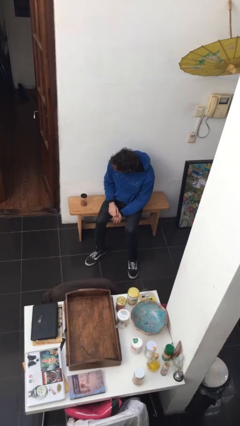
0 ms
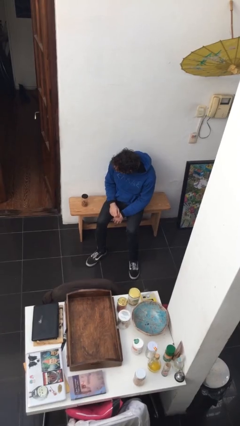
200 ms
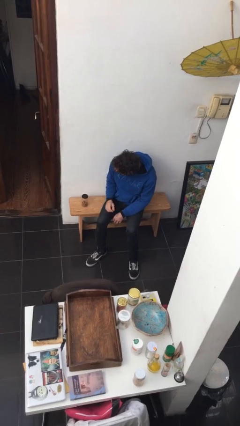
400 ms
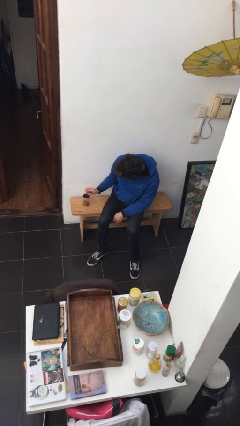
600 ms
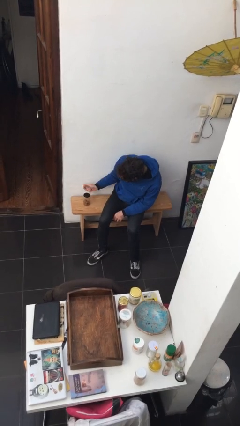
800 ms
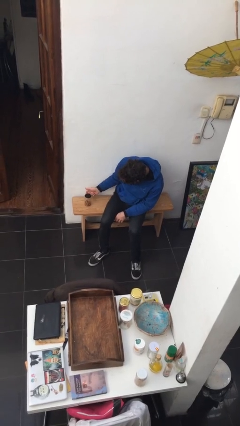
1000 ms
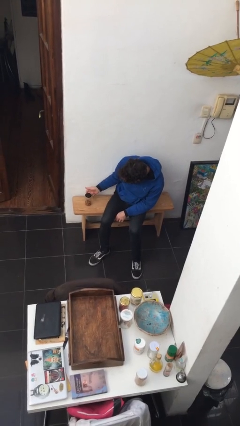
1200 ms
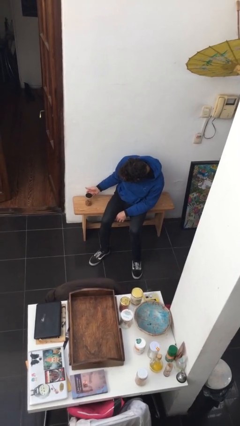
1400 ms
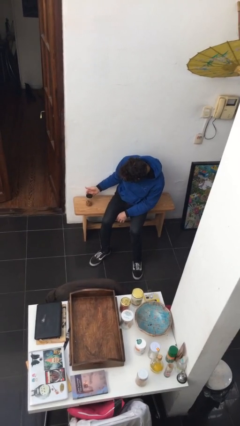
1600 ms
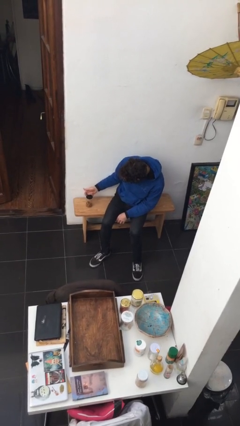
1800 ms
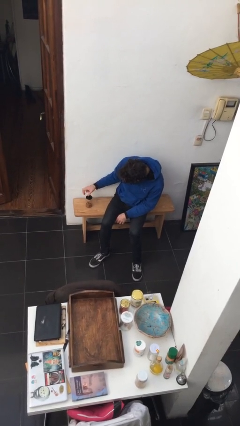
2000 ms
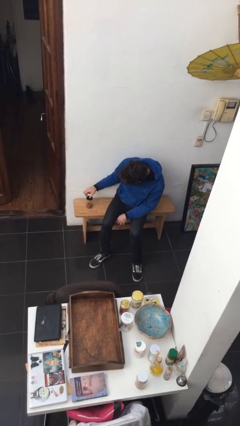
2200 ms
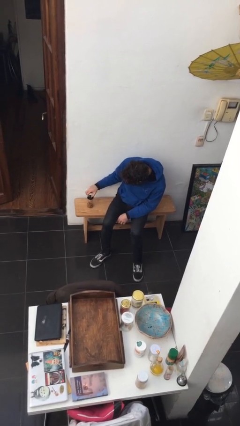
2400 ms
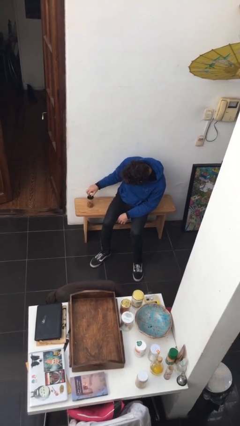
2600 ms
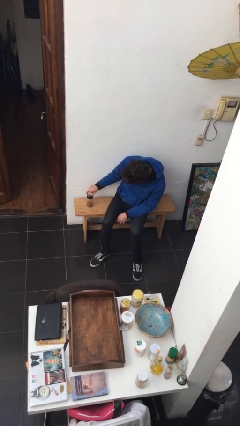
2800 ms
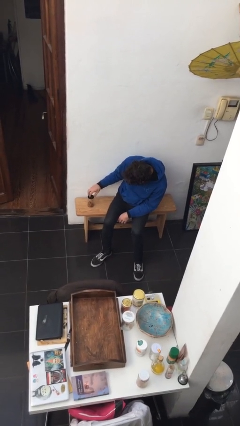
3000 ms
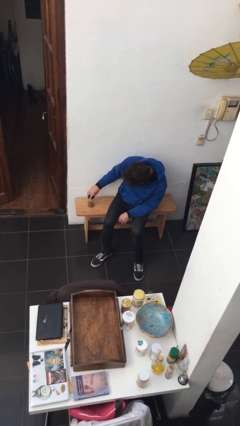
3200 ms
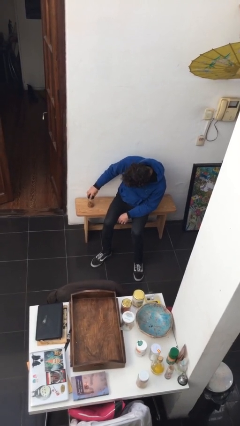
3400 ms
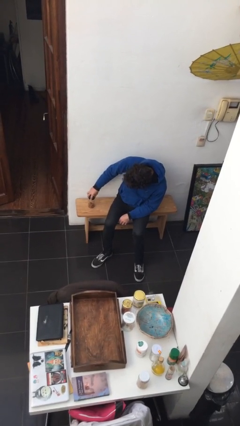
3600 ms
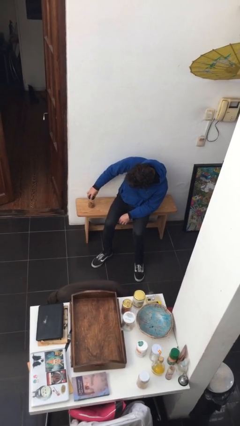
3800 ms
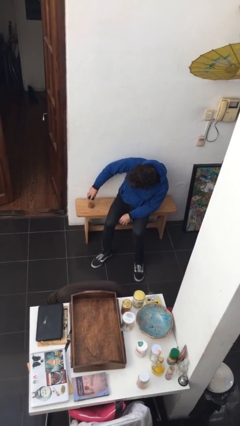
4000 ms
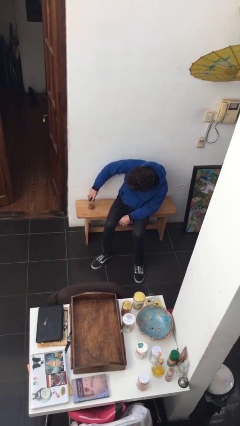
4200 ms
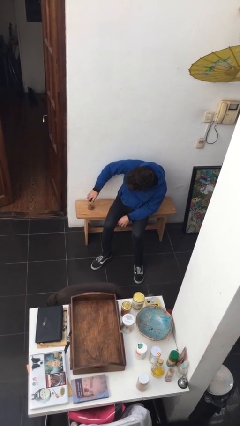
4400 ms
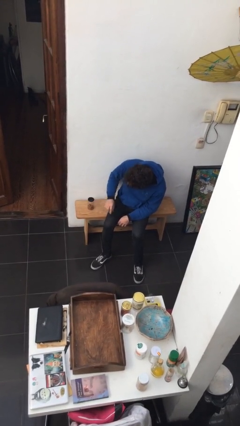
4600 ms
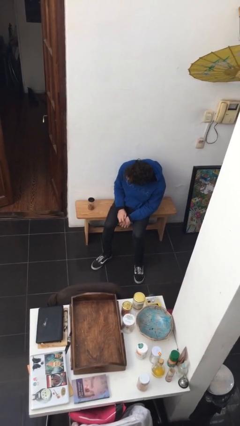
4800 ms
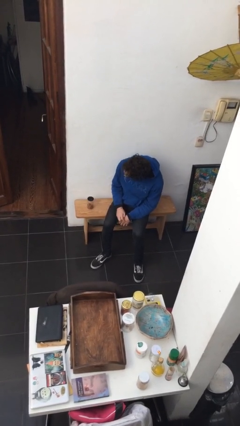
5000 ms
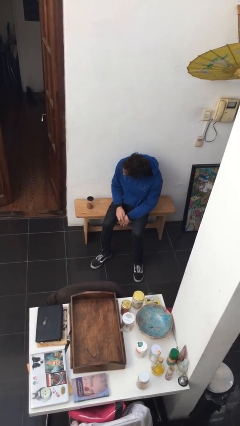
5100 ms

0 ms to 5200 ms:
person taps object with finger

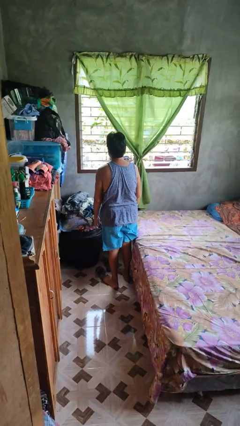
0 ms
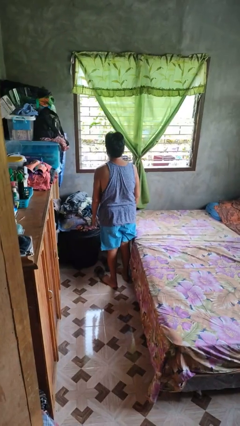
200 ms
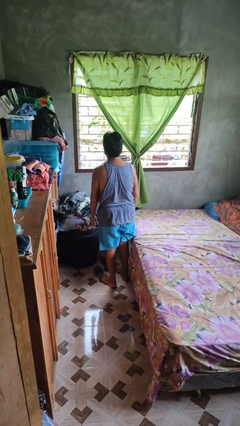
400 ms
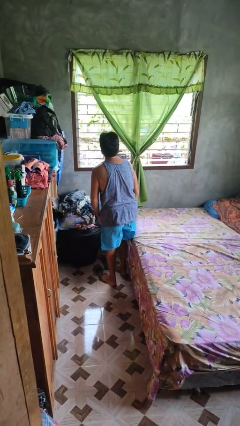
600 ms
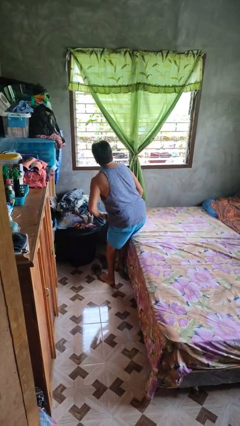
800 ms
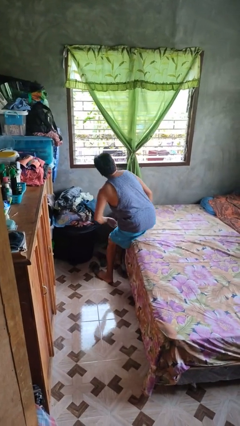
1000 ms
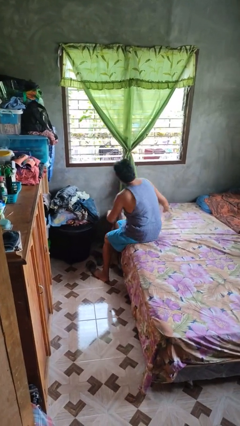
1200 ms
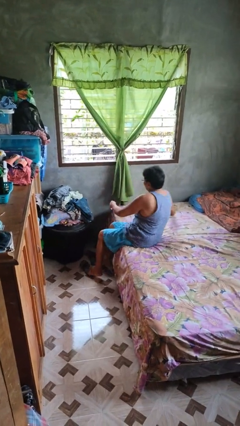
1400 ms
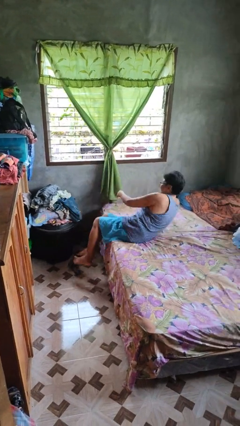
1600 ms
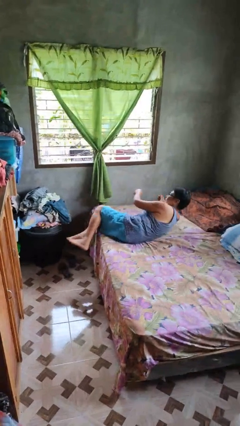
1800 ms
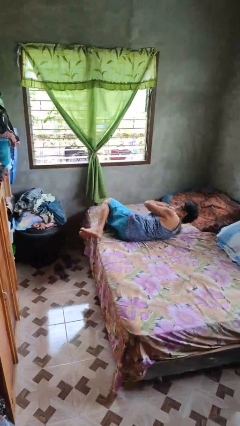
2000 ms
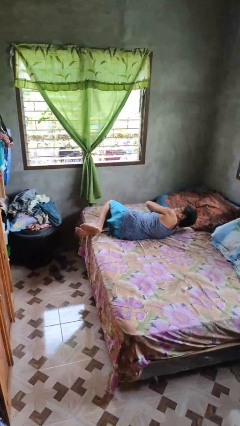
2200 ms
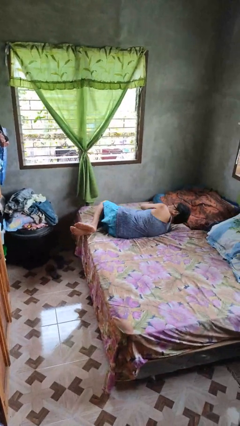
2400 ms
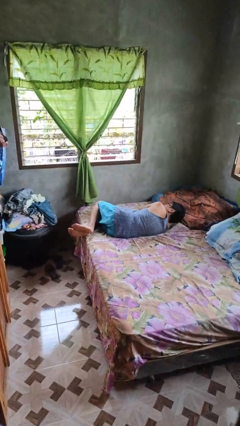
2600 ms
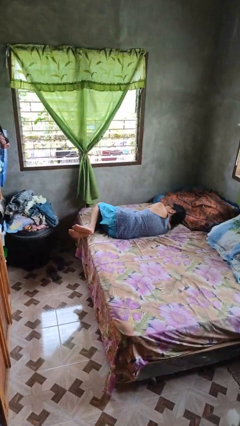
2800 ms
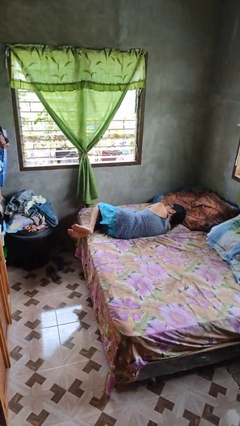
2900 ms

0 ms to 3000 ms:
person lies down on bed

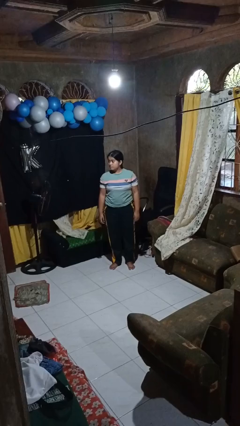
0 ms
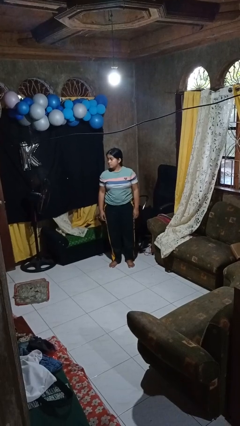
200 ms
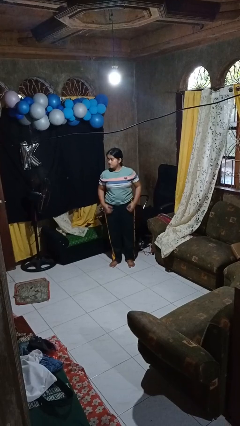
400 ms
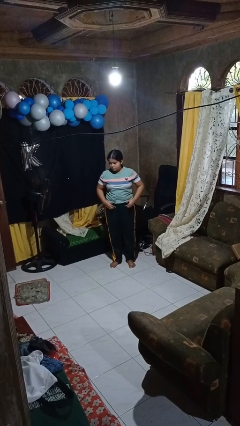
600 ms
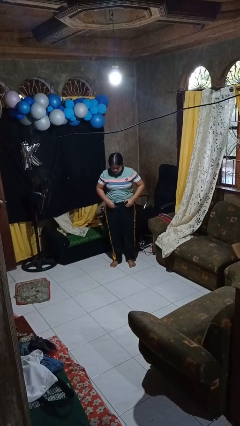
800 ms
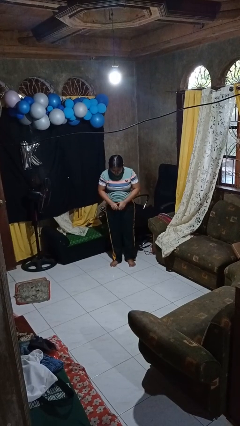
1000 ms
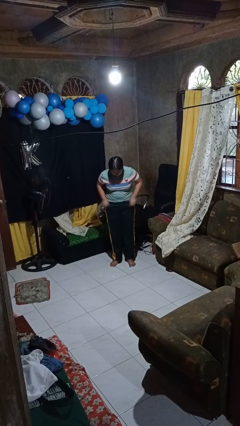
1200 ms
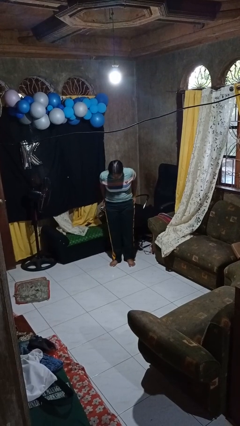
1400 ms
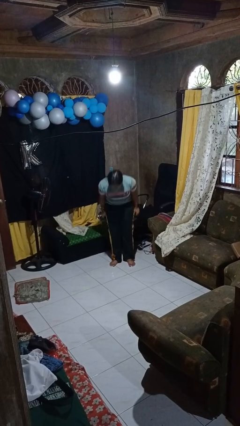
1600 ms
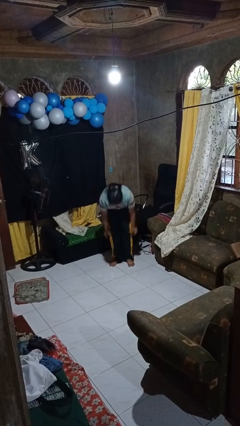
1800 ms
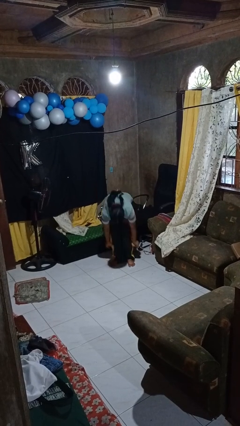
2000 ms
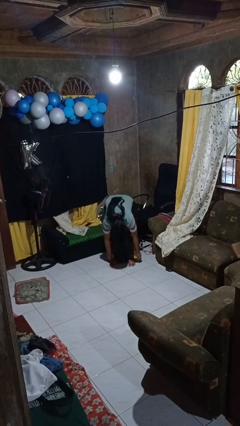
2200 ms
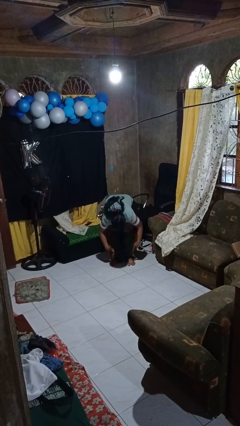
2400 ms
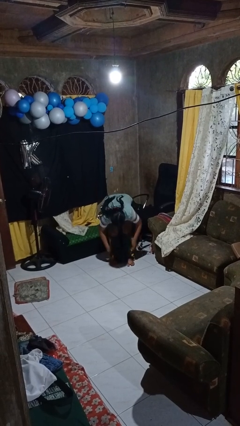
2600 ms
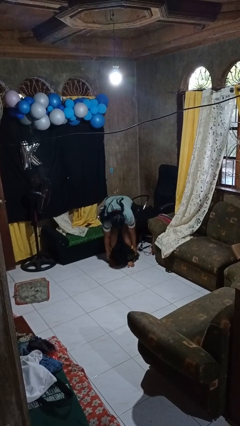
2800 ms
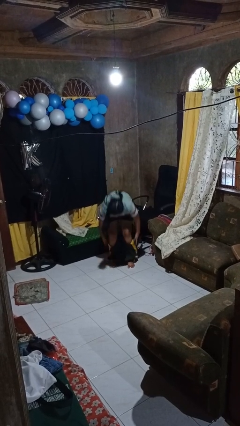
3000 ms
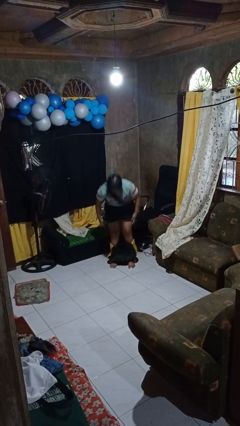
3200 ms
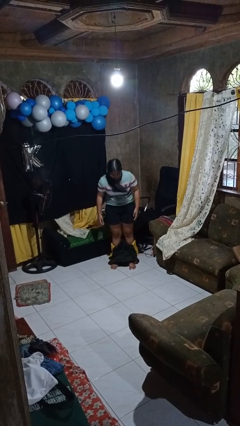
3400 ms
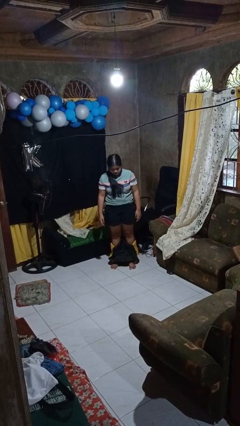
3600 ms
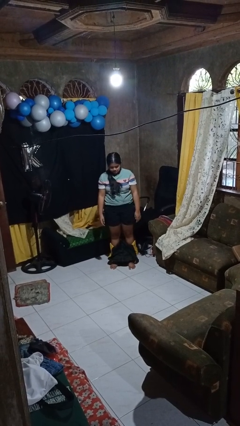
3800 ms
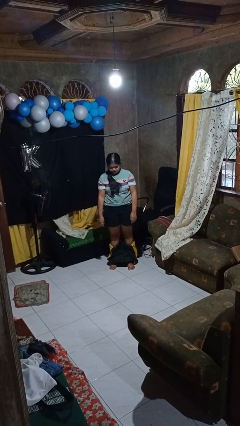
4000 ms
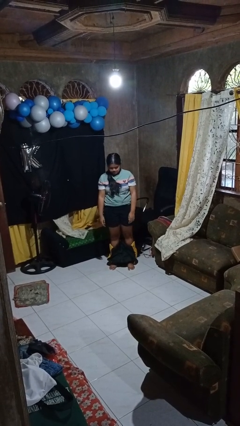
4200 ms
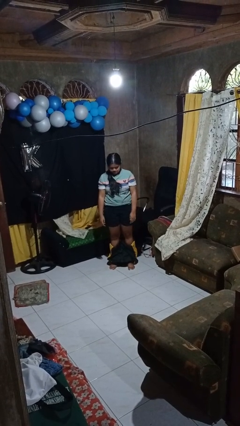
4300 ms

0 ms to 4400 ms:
person takes off pants

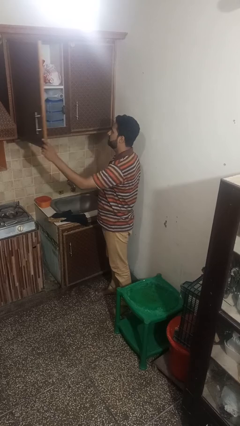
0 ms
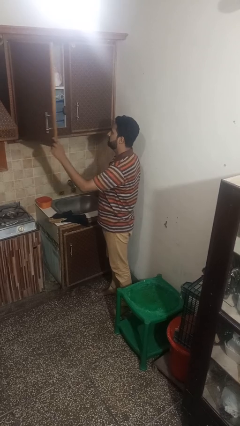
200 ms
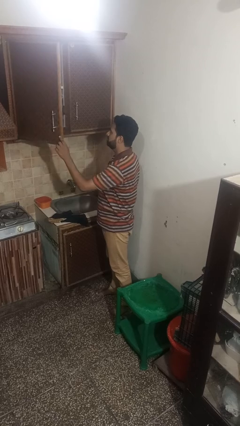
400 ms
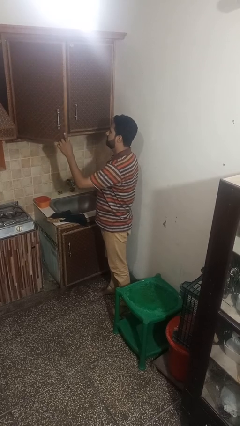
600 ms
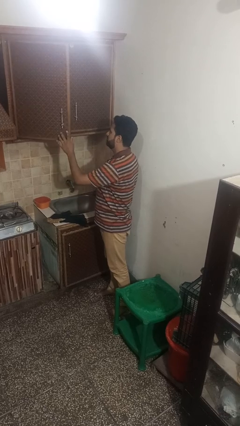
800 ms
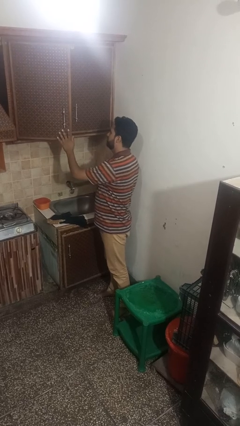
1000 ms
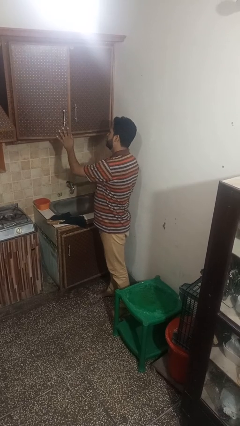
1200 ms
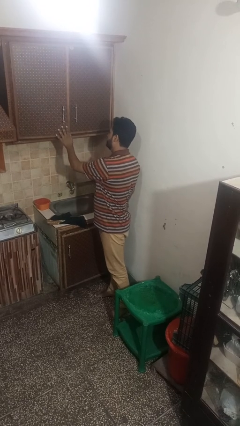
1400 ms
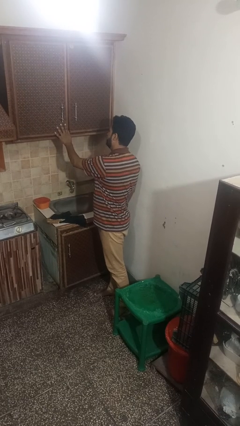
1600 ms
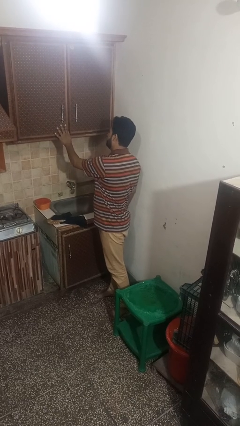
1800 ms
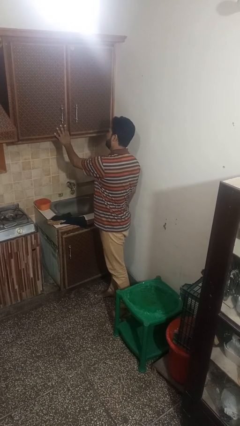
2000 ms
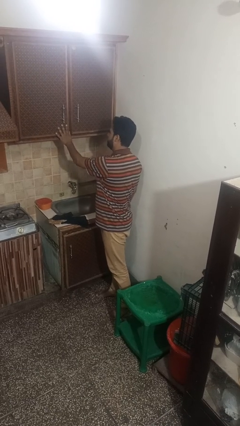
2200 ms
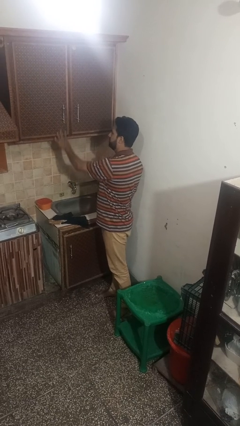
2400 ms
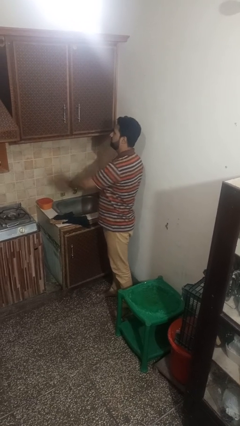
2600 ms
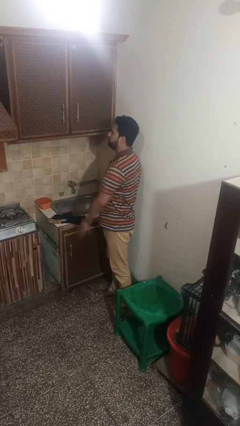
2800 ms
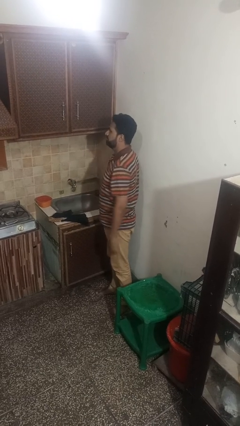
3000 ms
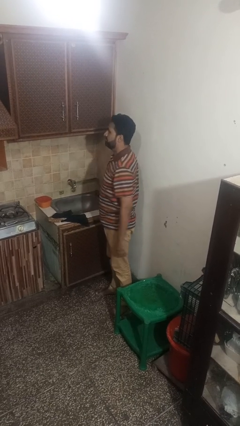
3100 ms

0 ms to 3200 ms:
person closes cabinet

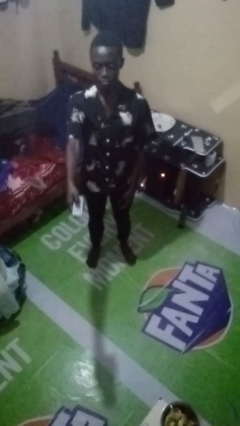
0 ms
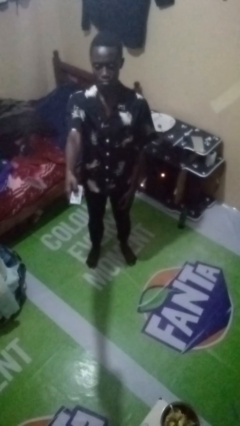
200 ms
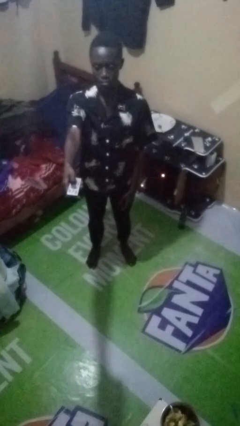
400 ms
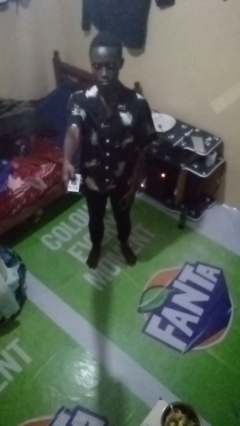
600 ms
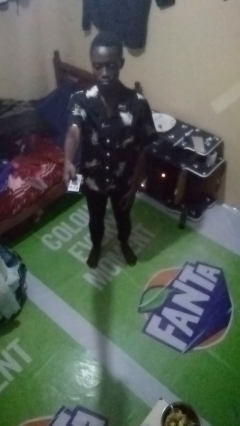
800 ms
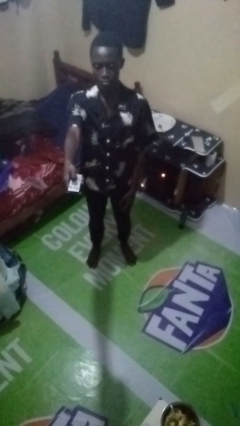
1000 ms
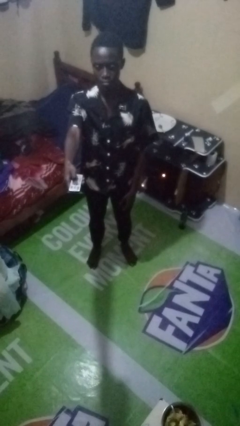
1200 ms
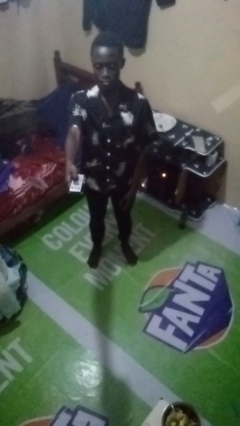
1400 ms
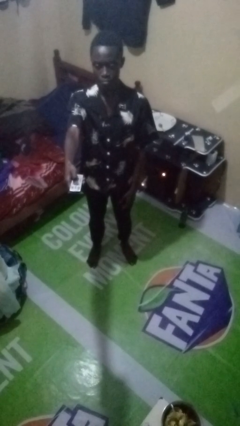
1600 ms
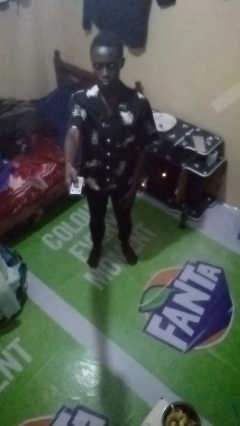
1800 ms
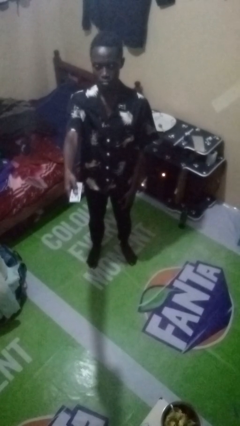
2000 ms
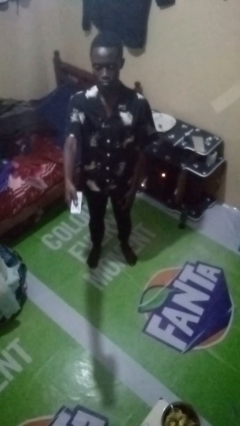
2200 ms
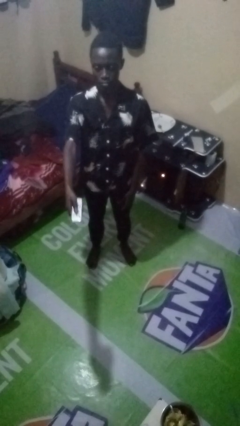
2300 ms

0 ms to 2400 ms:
person uses television remote
